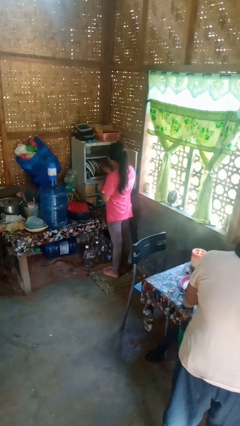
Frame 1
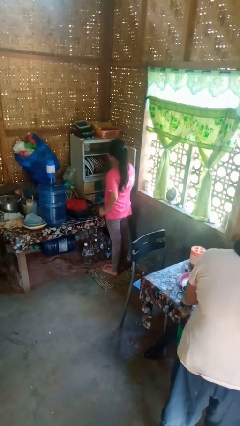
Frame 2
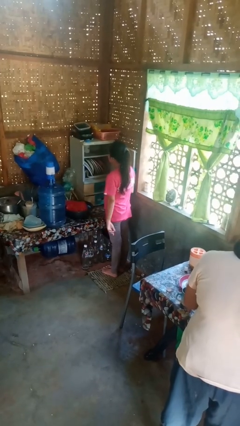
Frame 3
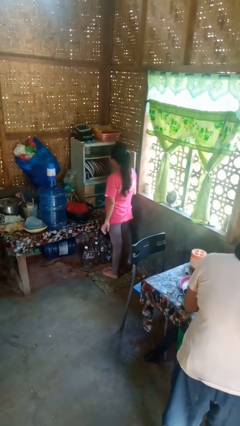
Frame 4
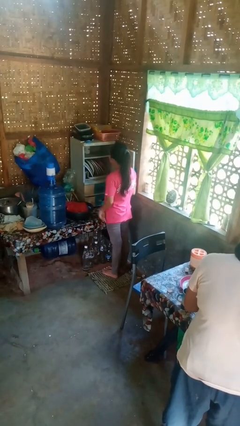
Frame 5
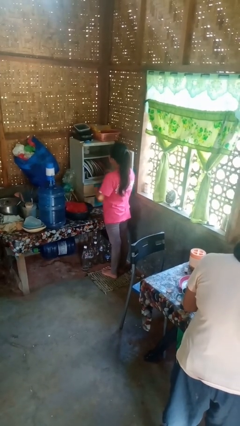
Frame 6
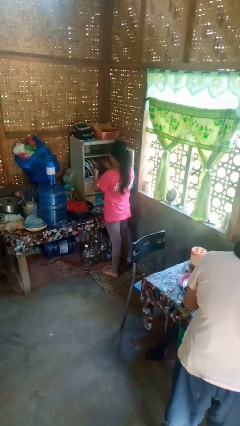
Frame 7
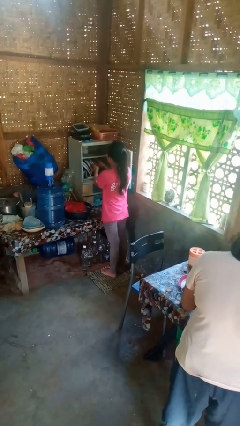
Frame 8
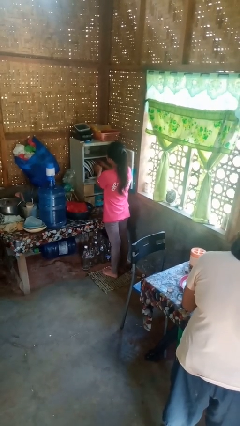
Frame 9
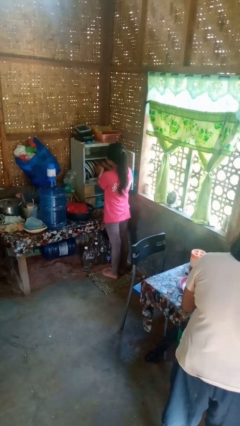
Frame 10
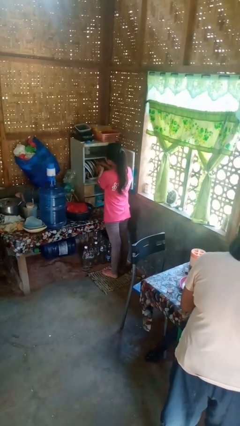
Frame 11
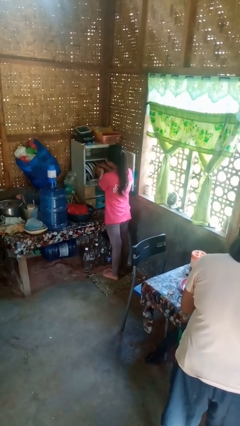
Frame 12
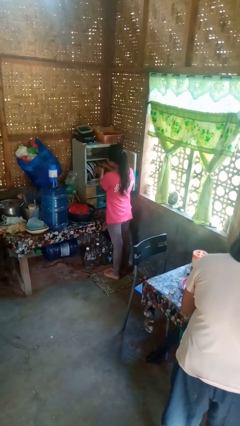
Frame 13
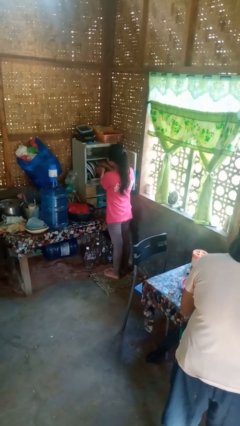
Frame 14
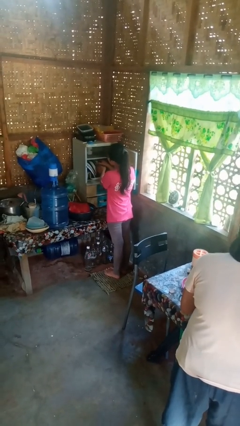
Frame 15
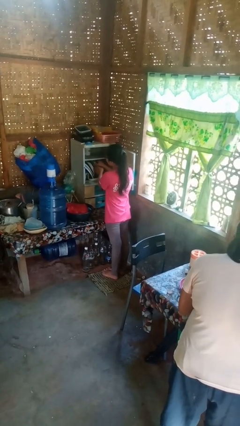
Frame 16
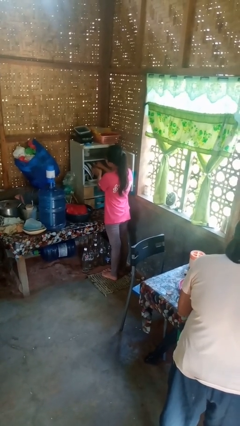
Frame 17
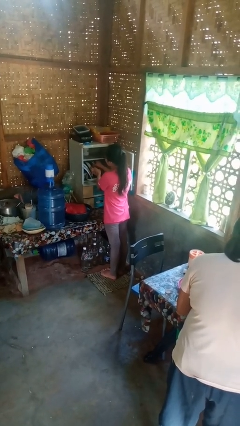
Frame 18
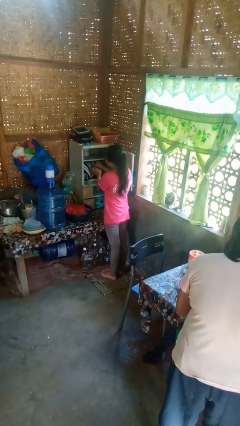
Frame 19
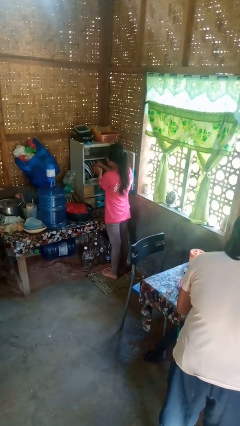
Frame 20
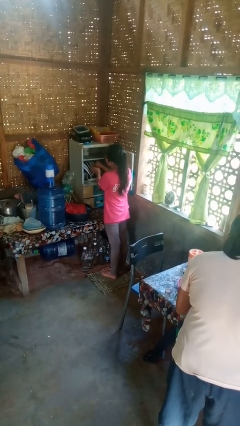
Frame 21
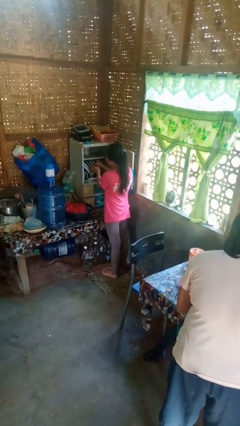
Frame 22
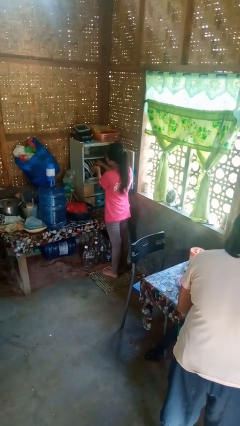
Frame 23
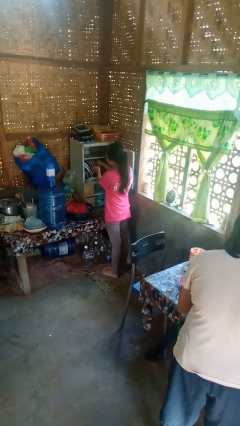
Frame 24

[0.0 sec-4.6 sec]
person searches in cabinet

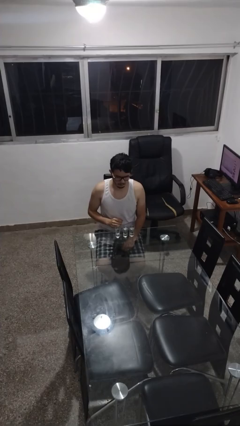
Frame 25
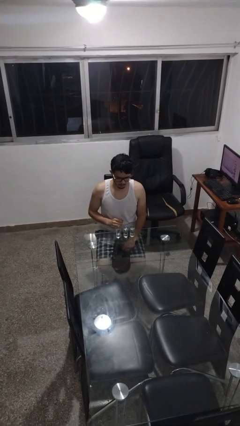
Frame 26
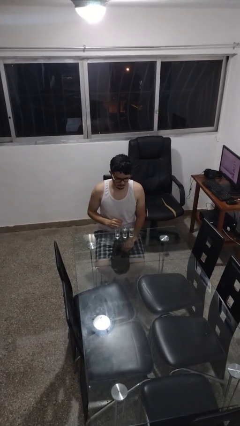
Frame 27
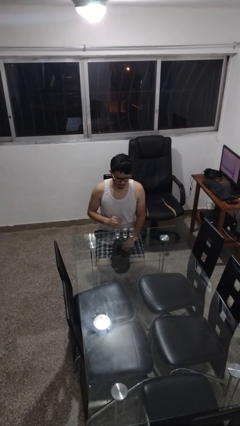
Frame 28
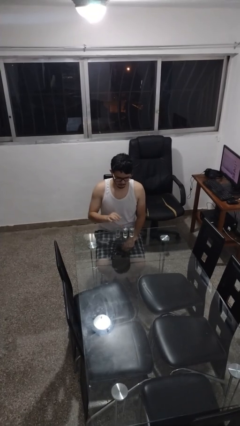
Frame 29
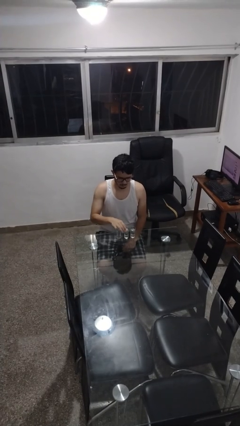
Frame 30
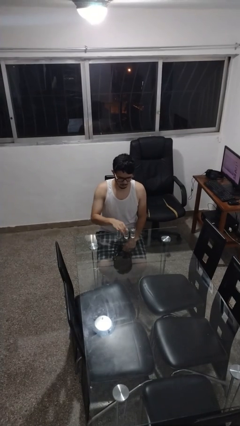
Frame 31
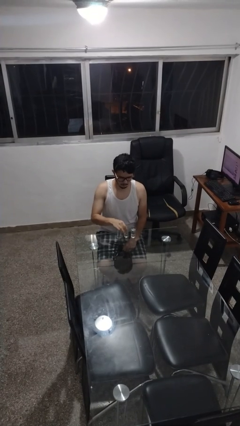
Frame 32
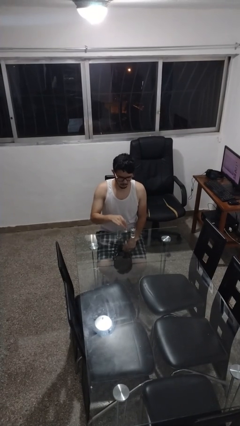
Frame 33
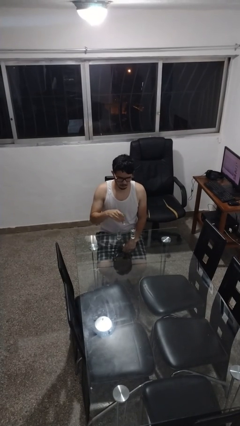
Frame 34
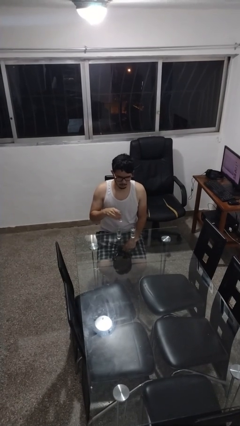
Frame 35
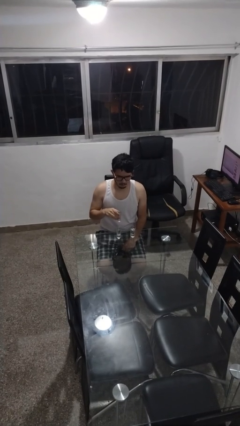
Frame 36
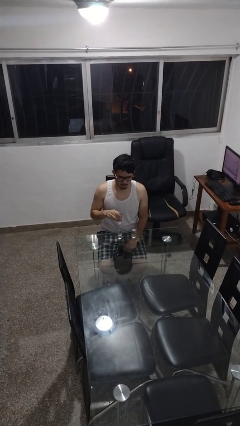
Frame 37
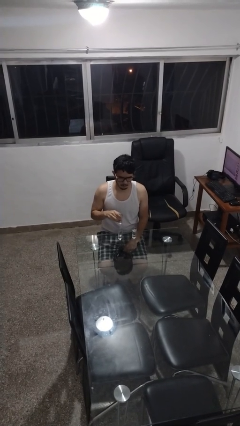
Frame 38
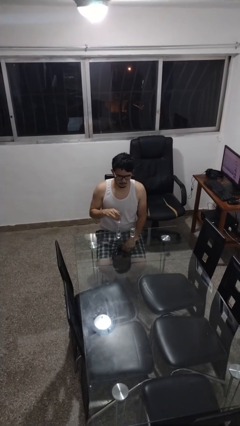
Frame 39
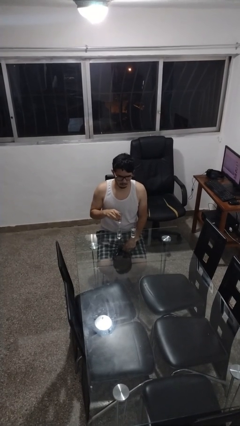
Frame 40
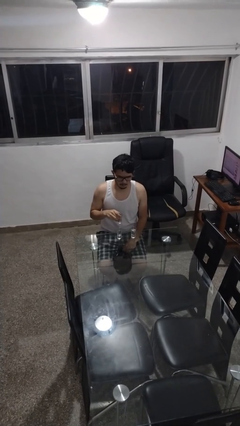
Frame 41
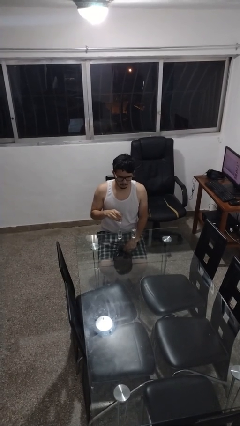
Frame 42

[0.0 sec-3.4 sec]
person picks up object from table

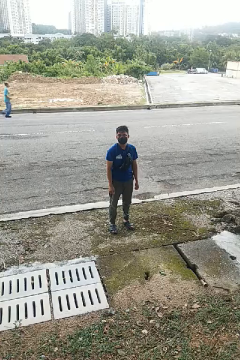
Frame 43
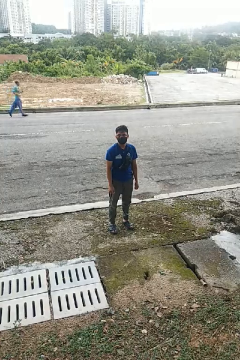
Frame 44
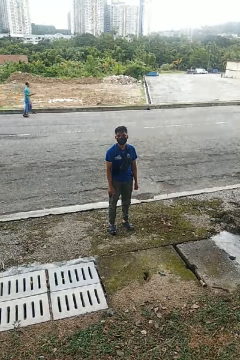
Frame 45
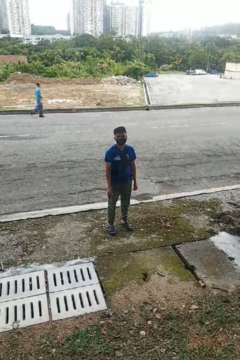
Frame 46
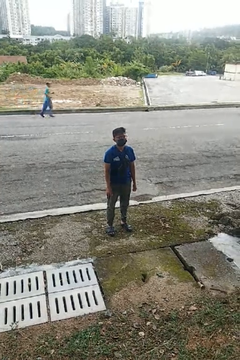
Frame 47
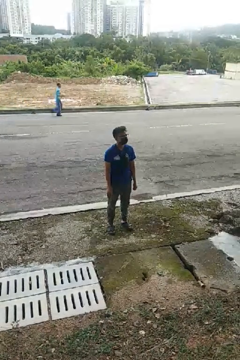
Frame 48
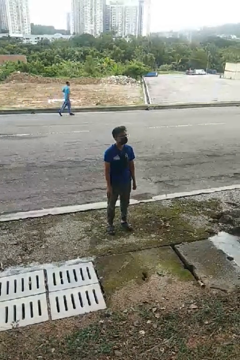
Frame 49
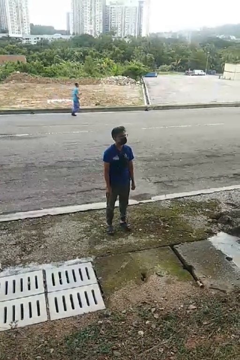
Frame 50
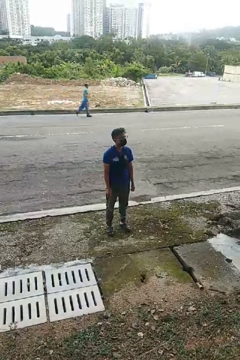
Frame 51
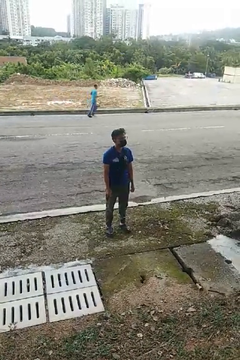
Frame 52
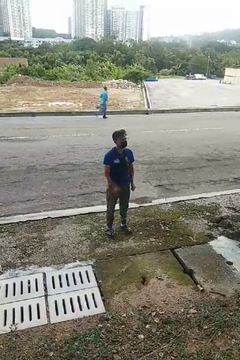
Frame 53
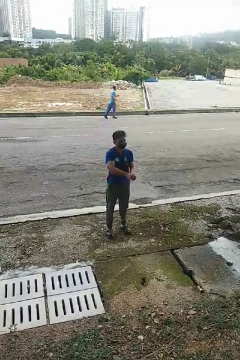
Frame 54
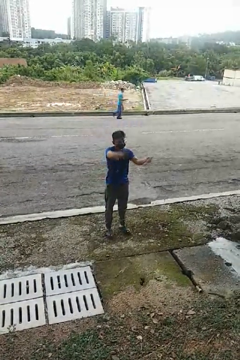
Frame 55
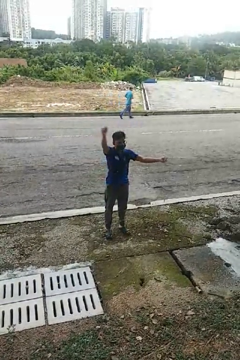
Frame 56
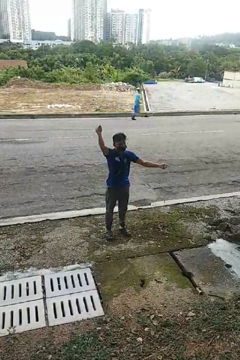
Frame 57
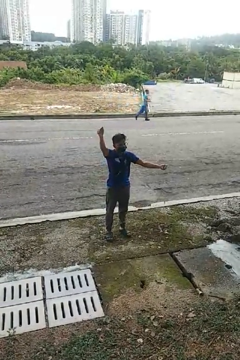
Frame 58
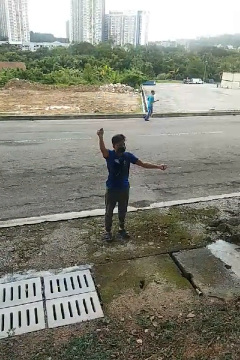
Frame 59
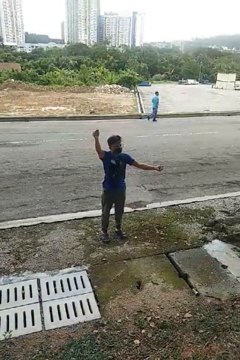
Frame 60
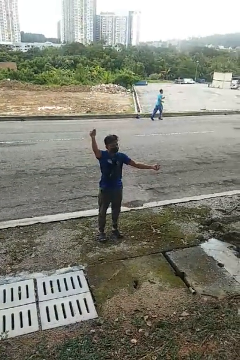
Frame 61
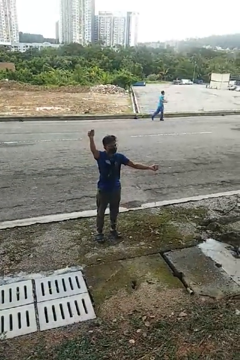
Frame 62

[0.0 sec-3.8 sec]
person gestures zoom in

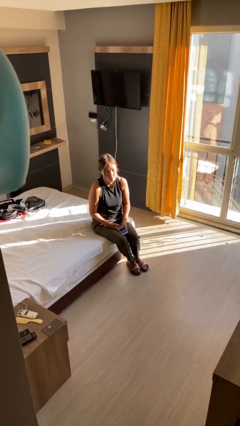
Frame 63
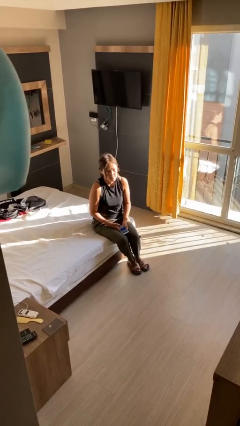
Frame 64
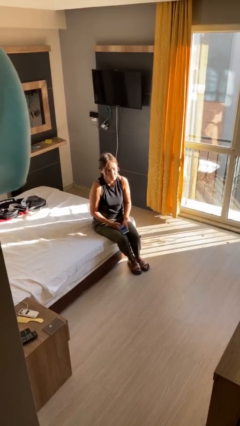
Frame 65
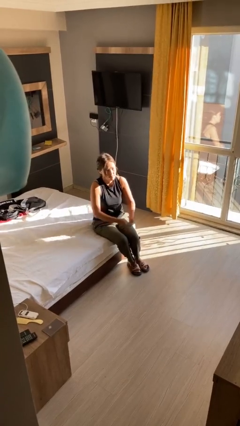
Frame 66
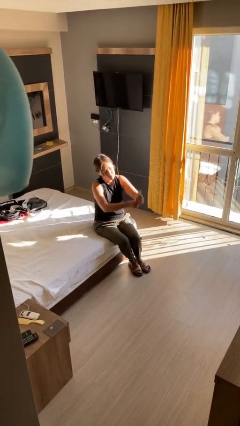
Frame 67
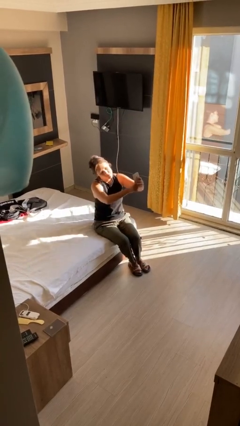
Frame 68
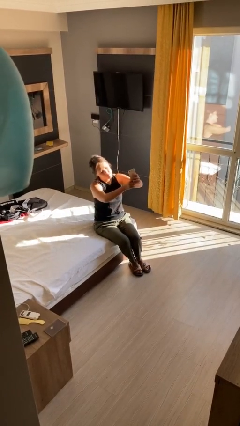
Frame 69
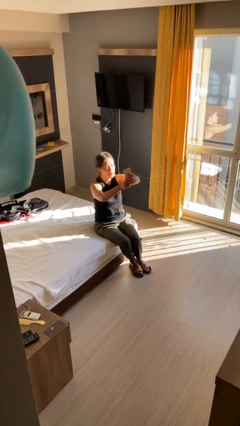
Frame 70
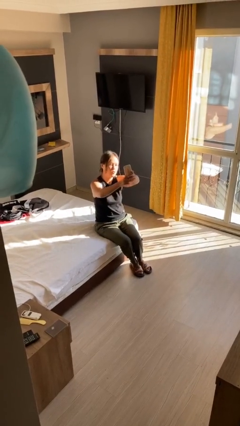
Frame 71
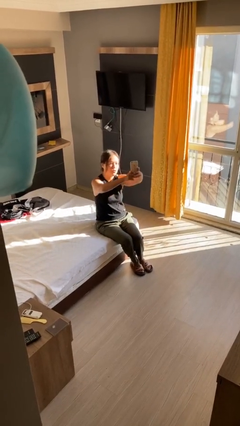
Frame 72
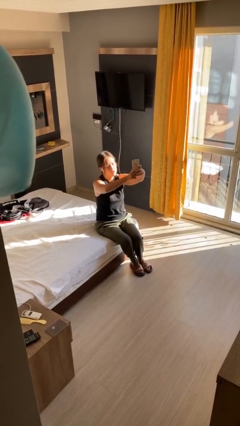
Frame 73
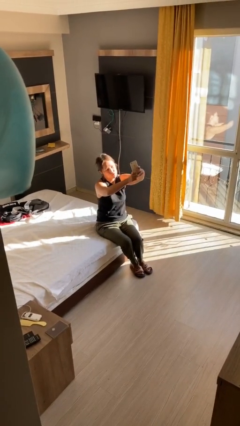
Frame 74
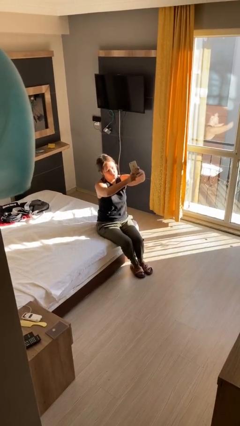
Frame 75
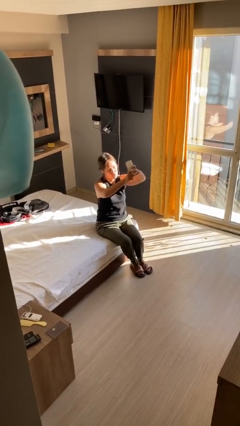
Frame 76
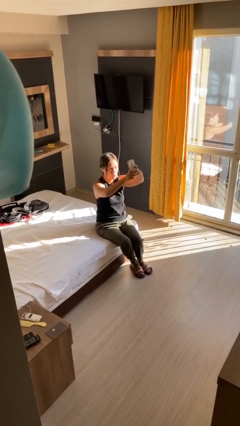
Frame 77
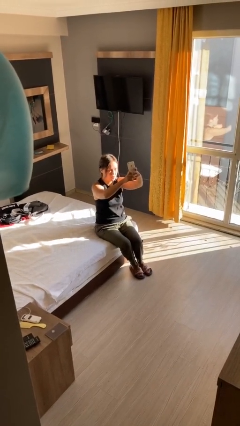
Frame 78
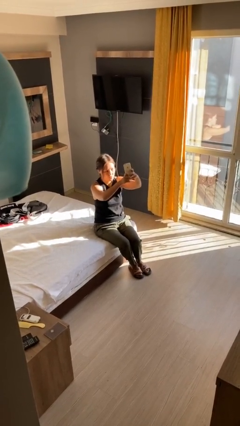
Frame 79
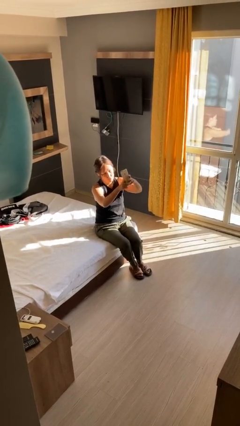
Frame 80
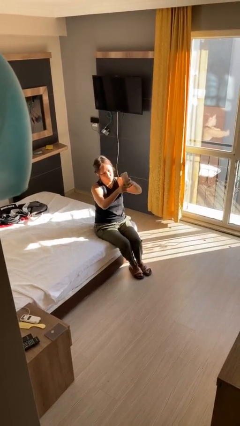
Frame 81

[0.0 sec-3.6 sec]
person takes selfie

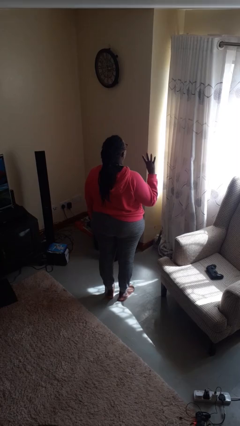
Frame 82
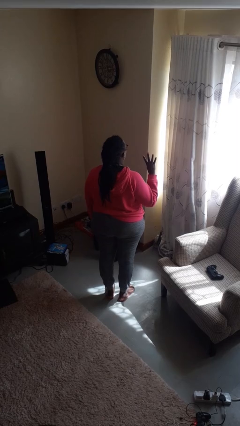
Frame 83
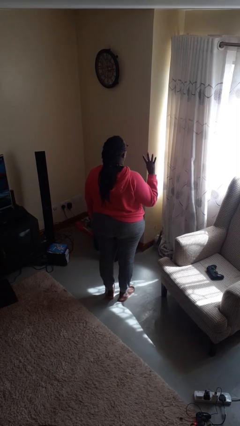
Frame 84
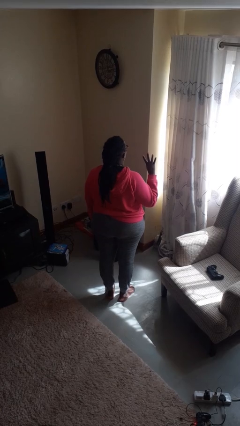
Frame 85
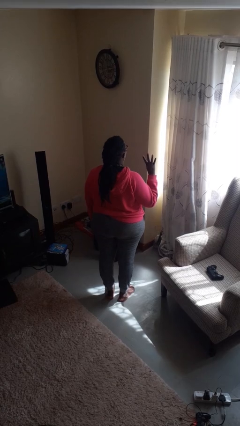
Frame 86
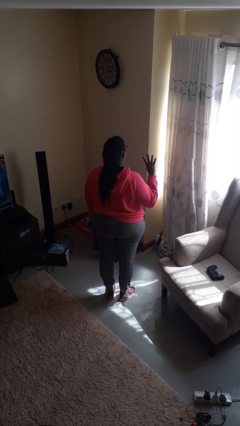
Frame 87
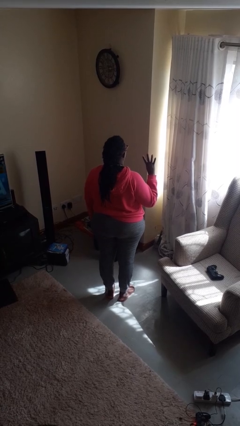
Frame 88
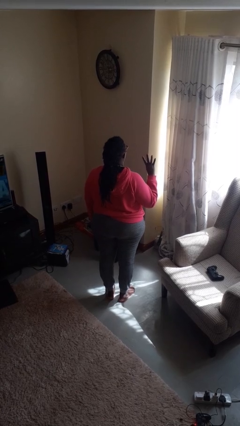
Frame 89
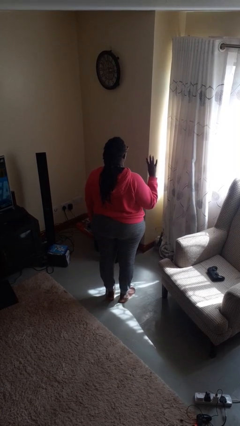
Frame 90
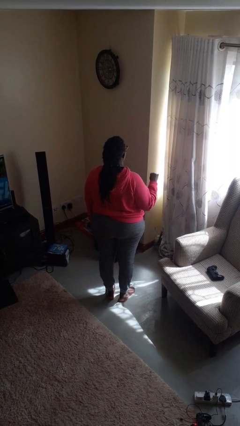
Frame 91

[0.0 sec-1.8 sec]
person gestures number four

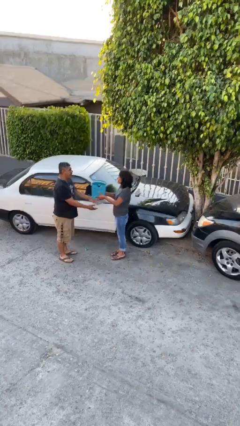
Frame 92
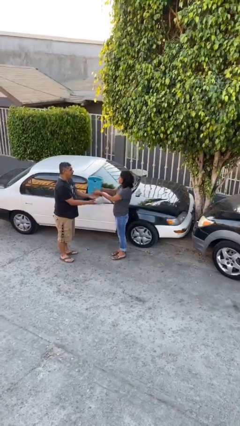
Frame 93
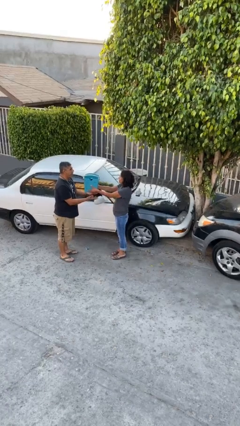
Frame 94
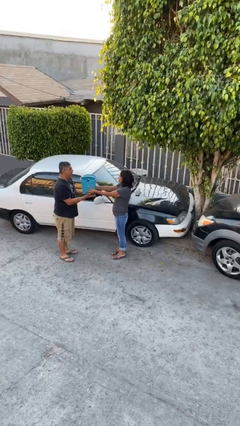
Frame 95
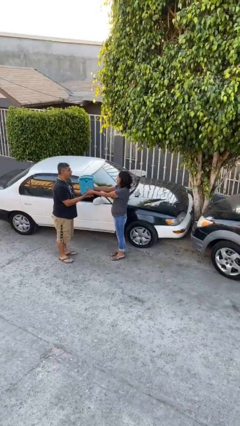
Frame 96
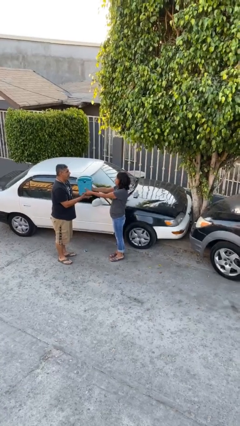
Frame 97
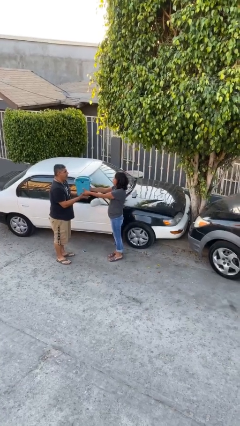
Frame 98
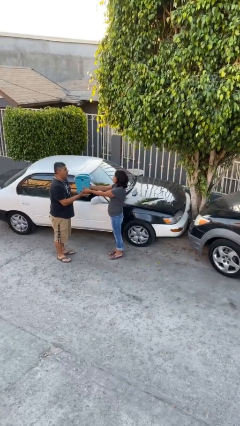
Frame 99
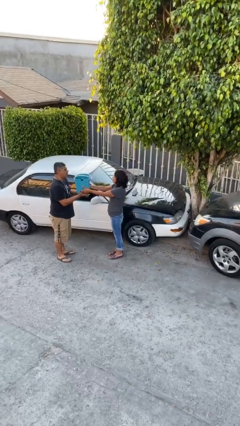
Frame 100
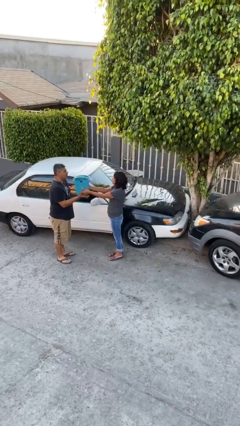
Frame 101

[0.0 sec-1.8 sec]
person transfers object to person
